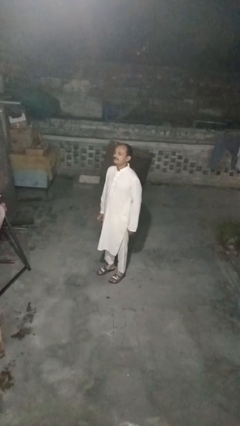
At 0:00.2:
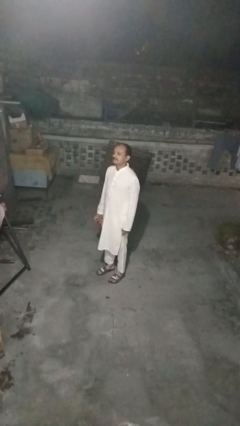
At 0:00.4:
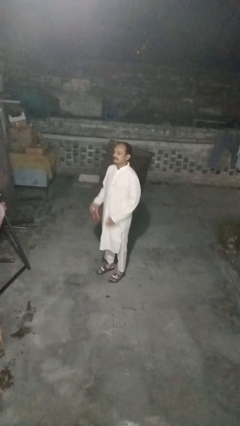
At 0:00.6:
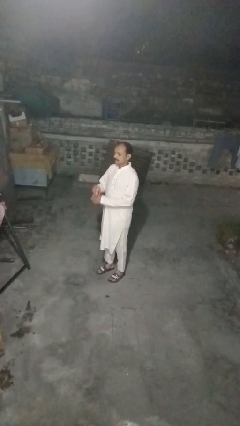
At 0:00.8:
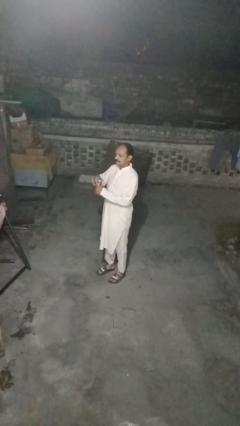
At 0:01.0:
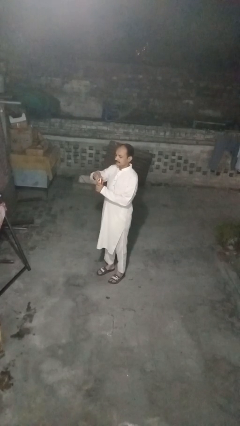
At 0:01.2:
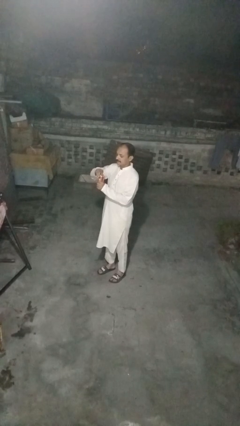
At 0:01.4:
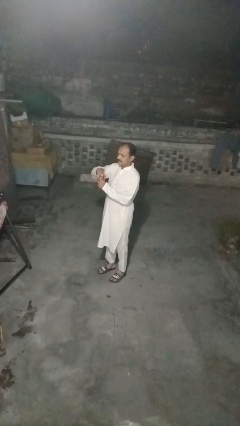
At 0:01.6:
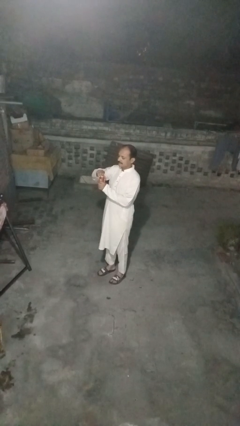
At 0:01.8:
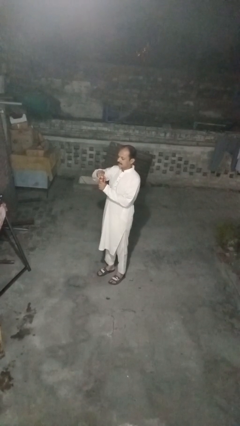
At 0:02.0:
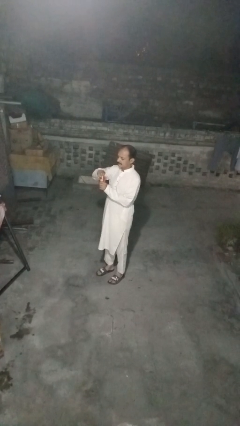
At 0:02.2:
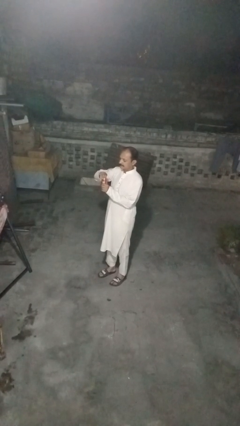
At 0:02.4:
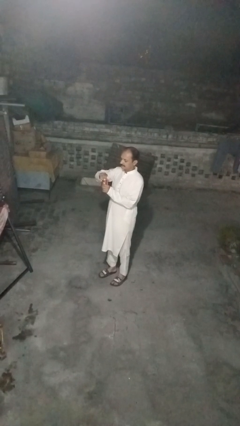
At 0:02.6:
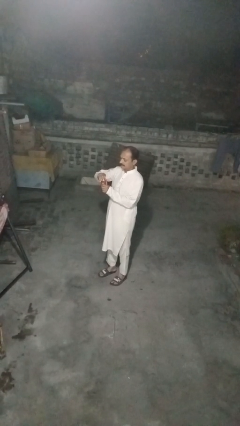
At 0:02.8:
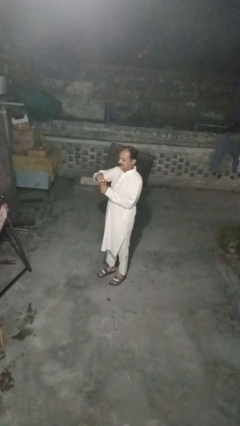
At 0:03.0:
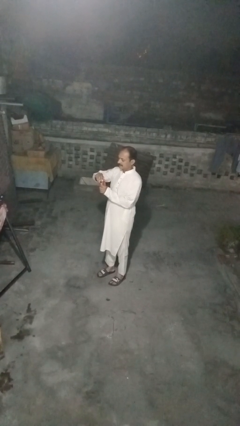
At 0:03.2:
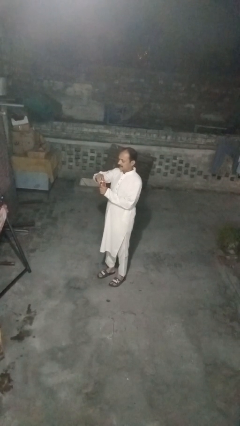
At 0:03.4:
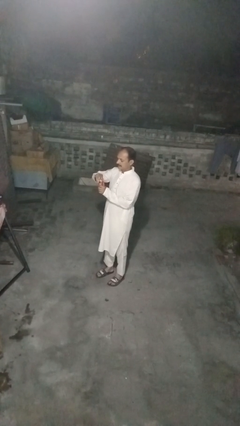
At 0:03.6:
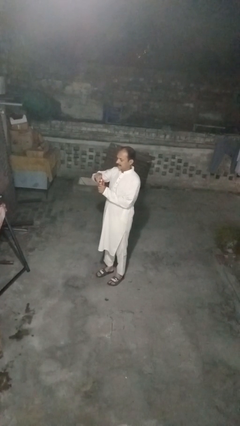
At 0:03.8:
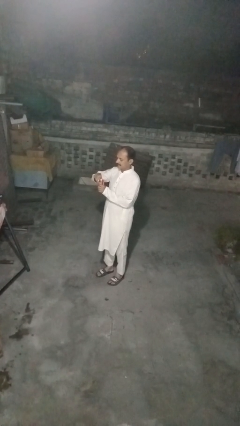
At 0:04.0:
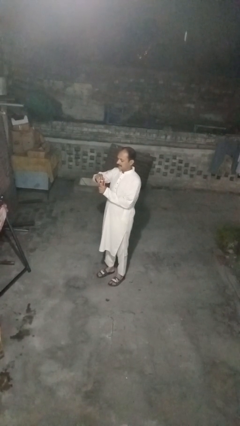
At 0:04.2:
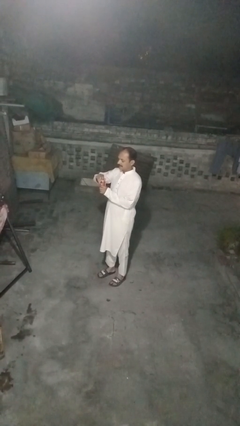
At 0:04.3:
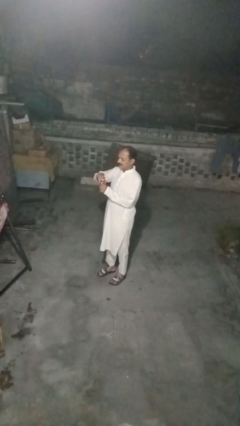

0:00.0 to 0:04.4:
person opens beverage can

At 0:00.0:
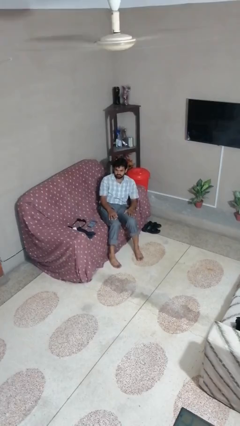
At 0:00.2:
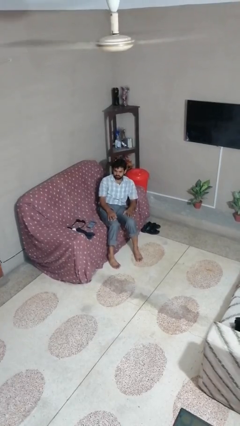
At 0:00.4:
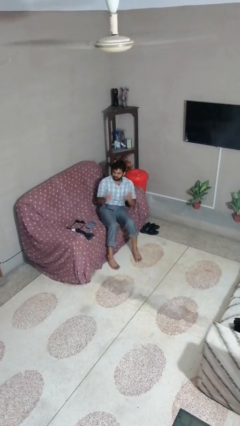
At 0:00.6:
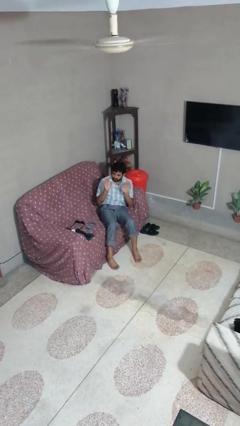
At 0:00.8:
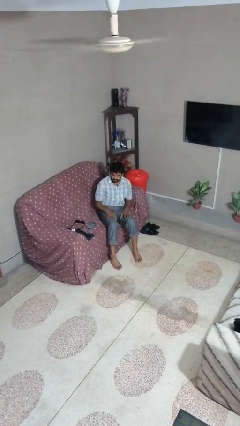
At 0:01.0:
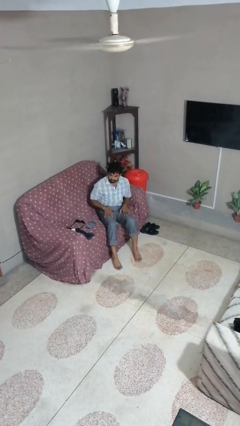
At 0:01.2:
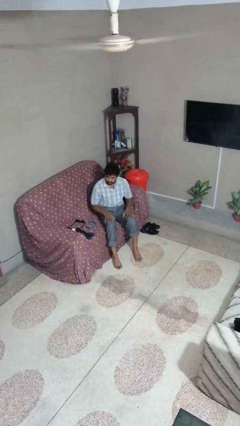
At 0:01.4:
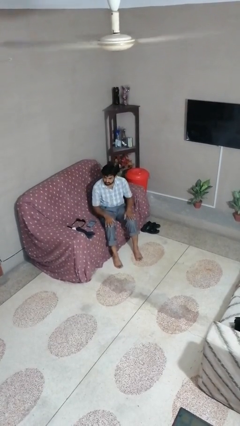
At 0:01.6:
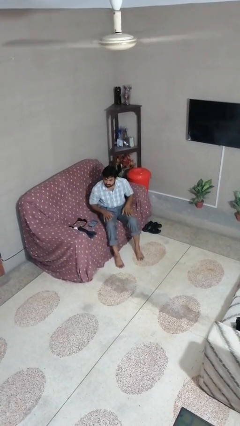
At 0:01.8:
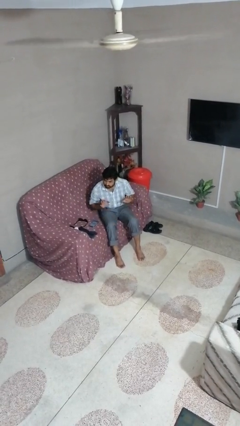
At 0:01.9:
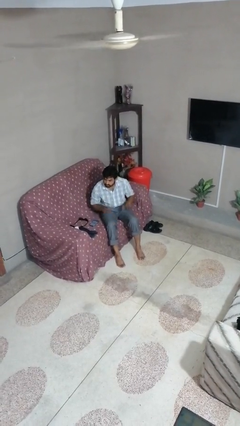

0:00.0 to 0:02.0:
person slaps hands on thighs

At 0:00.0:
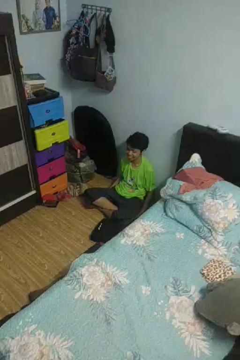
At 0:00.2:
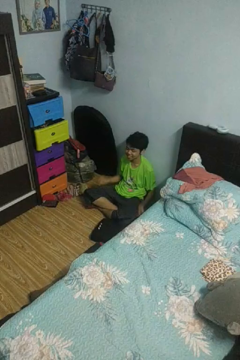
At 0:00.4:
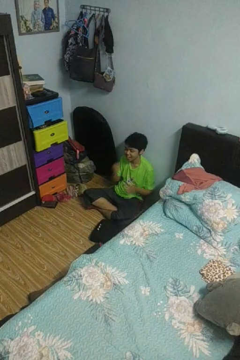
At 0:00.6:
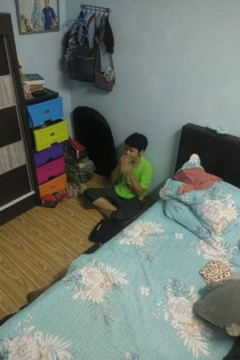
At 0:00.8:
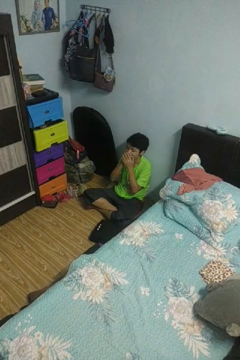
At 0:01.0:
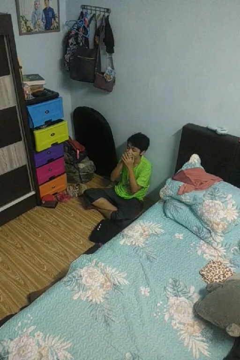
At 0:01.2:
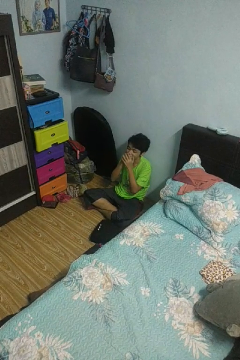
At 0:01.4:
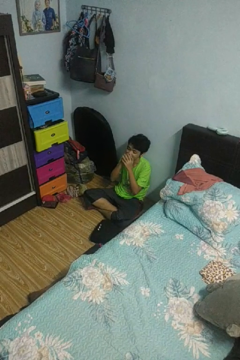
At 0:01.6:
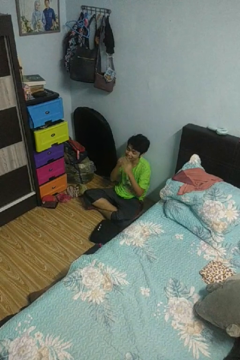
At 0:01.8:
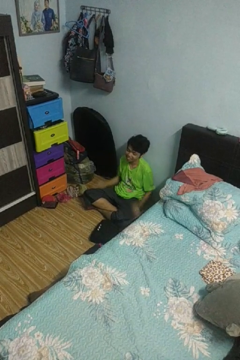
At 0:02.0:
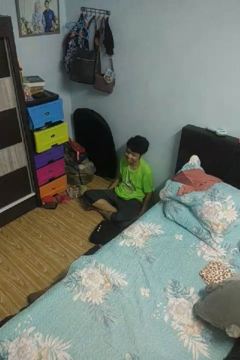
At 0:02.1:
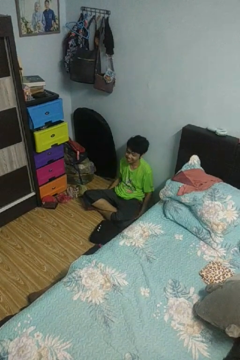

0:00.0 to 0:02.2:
person yawns

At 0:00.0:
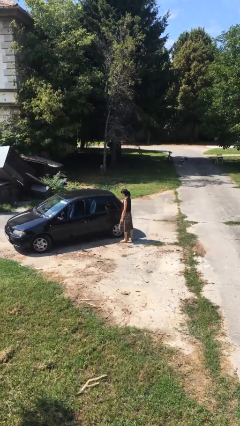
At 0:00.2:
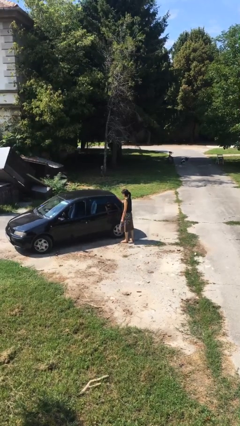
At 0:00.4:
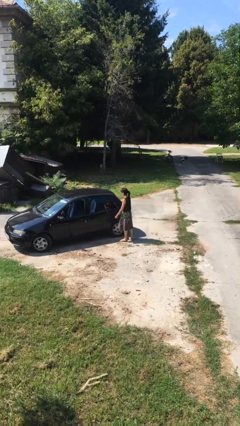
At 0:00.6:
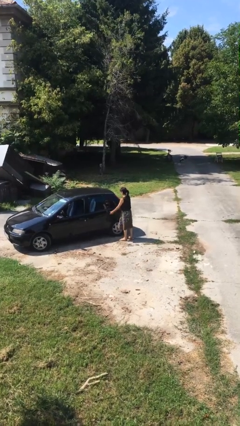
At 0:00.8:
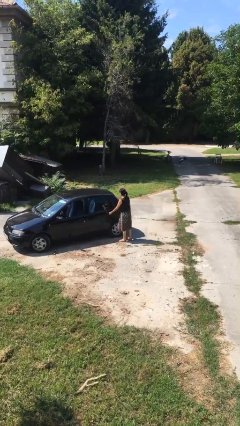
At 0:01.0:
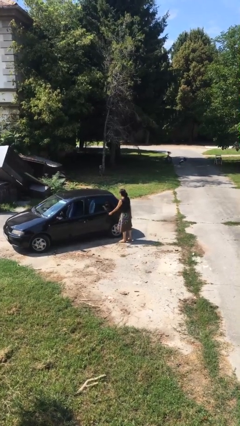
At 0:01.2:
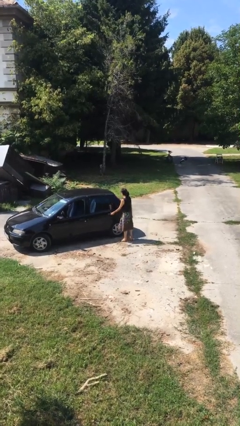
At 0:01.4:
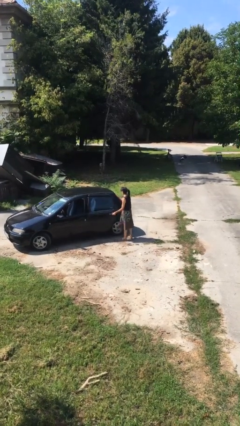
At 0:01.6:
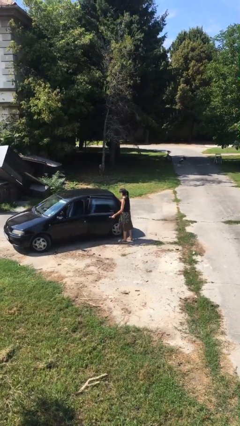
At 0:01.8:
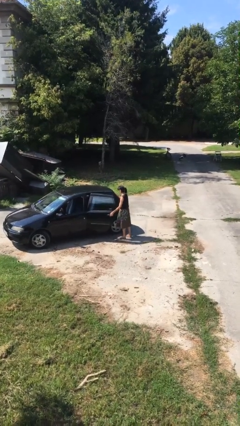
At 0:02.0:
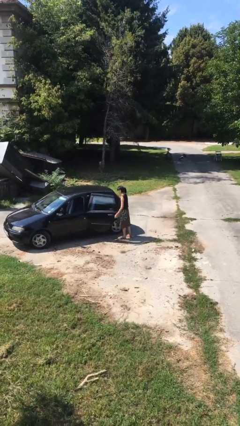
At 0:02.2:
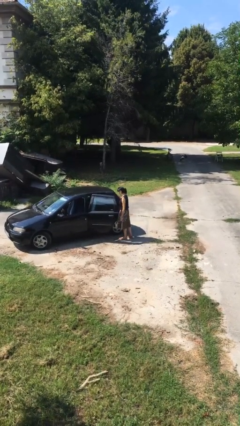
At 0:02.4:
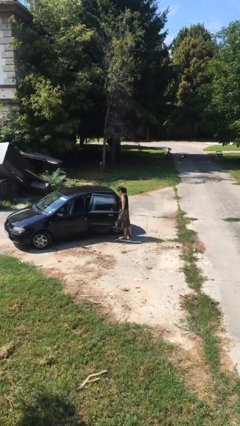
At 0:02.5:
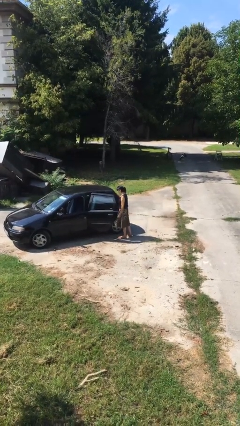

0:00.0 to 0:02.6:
person opens car door

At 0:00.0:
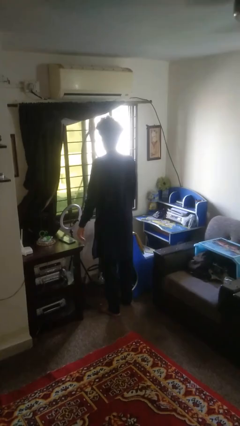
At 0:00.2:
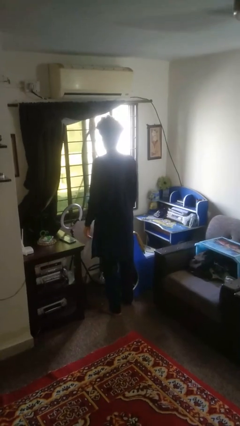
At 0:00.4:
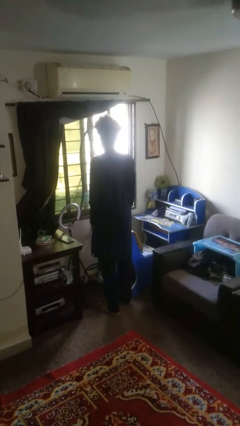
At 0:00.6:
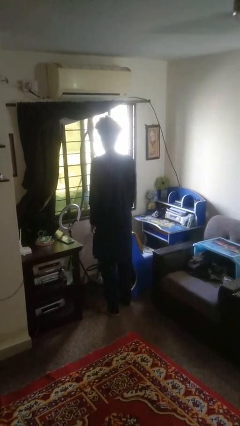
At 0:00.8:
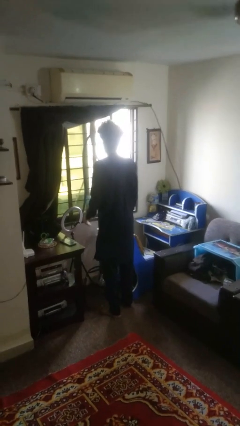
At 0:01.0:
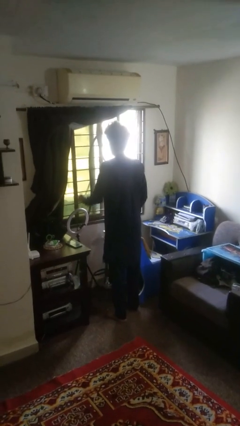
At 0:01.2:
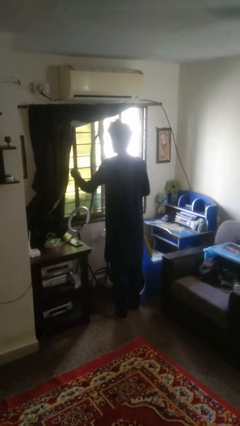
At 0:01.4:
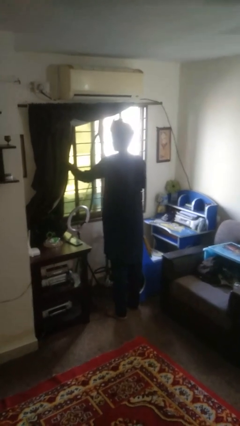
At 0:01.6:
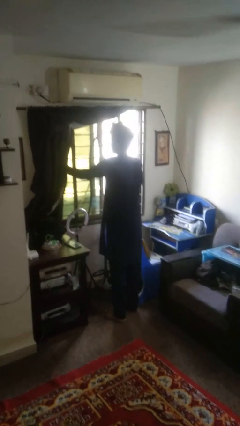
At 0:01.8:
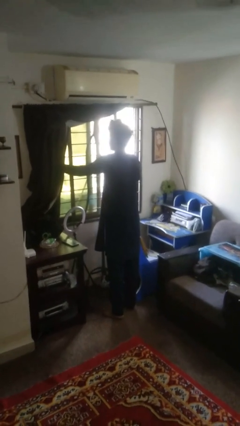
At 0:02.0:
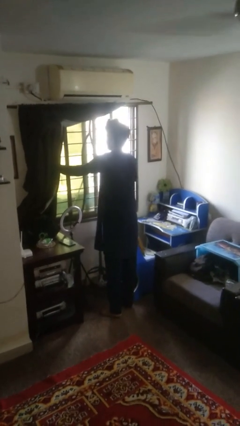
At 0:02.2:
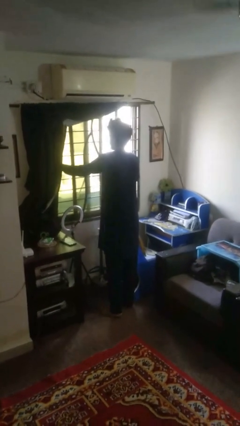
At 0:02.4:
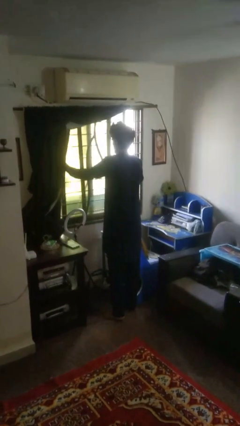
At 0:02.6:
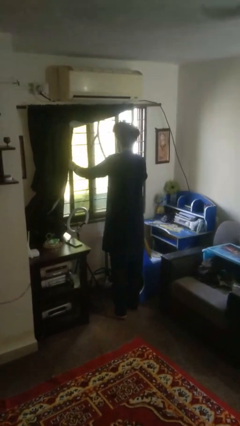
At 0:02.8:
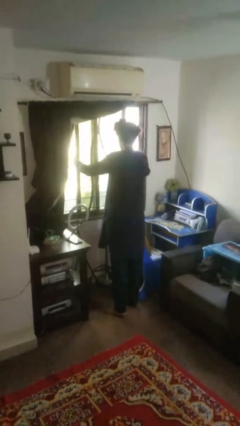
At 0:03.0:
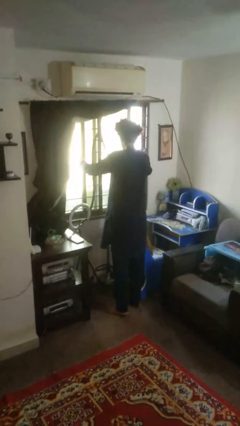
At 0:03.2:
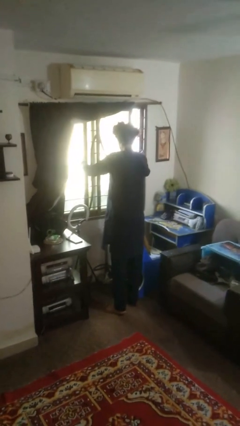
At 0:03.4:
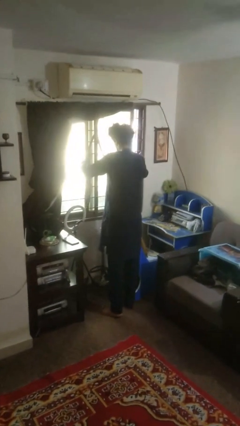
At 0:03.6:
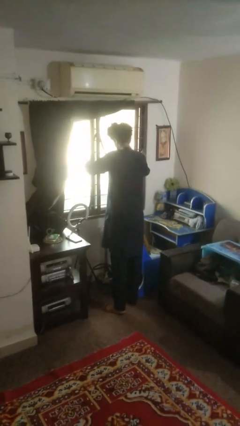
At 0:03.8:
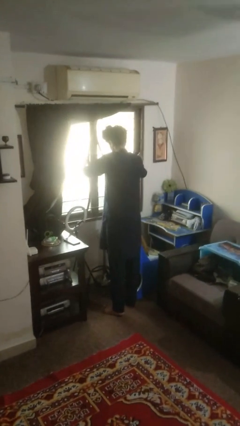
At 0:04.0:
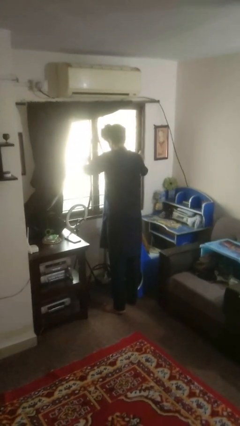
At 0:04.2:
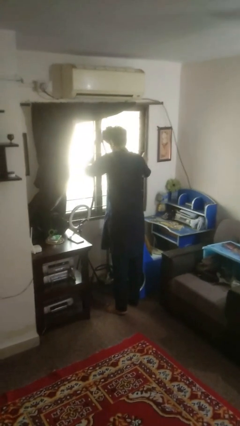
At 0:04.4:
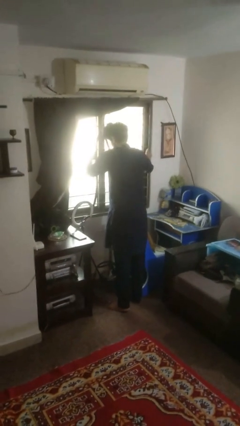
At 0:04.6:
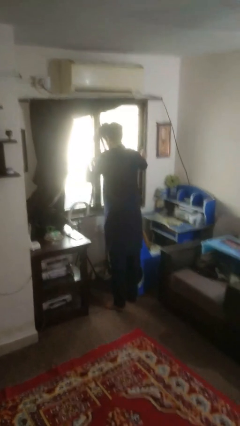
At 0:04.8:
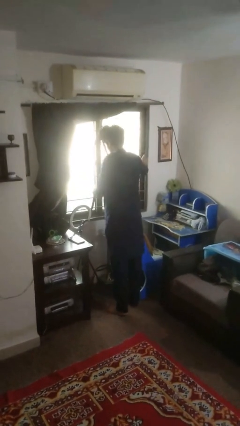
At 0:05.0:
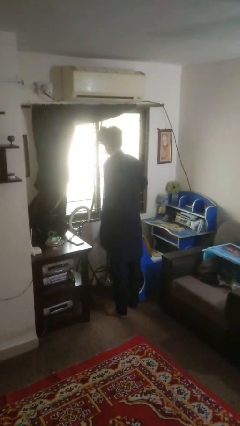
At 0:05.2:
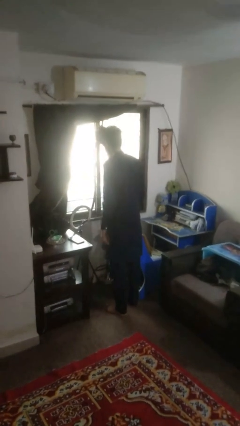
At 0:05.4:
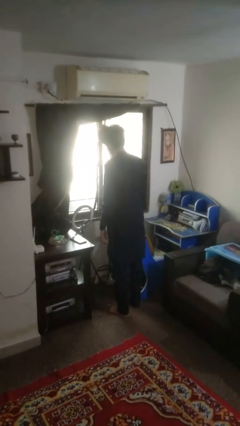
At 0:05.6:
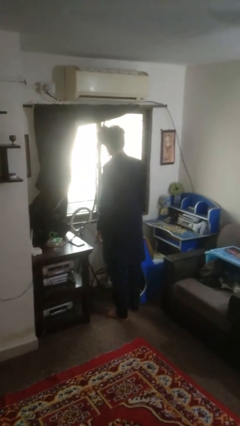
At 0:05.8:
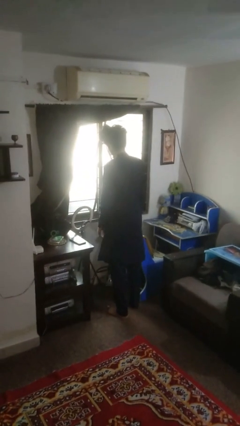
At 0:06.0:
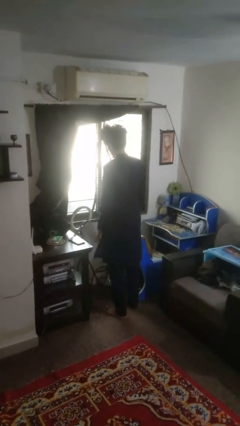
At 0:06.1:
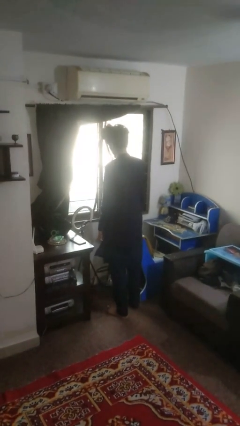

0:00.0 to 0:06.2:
person closes home window

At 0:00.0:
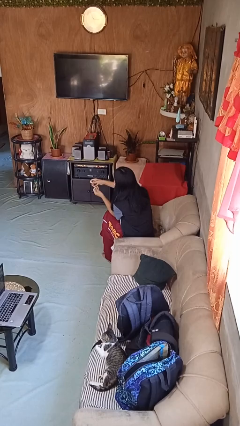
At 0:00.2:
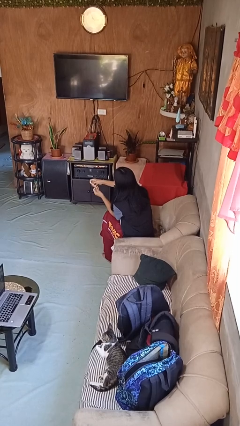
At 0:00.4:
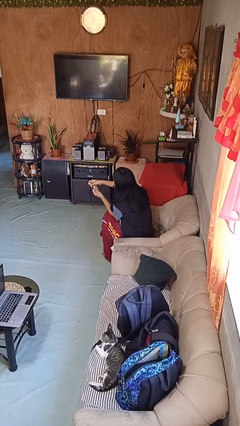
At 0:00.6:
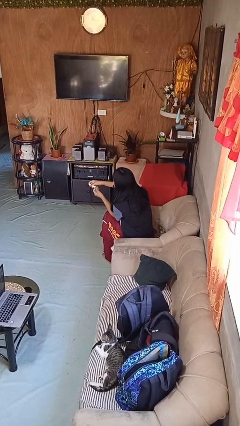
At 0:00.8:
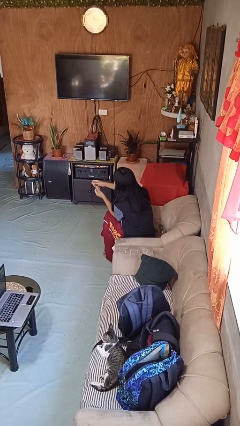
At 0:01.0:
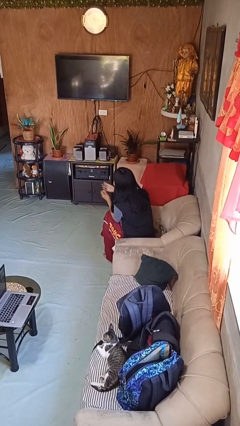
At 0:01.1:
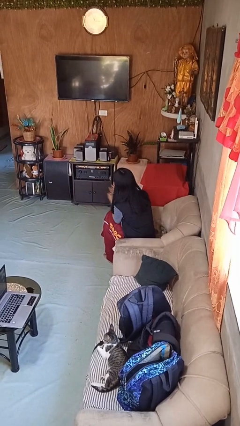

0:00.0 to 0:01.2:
person clips fingernails
